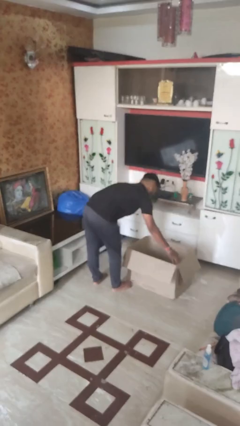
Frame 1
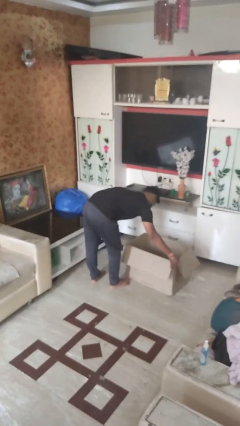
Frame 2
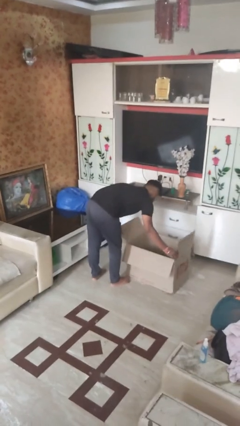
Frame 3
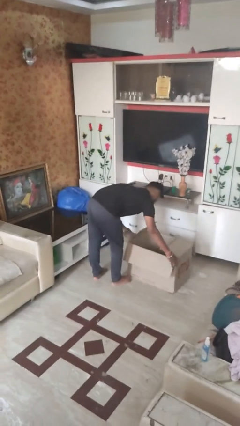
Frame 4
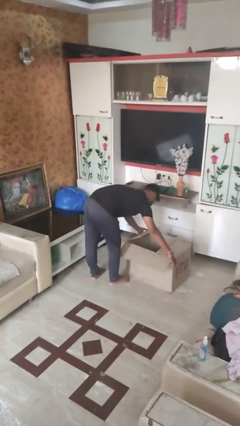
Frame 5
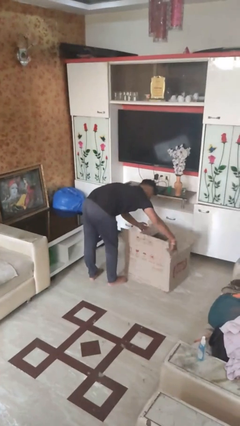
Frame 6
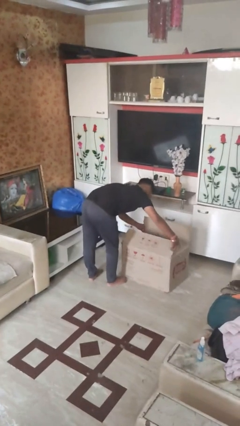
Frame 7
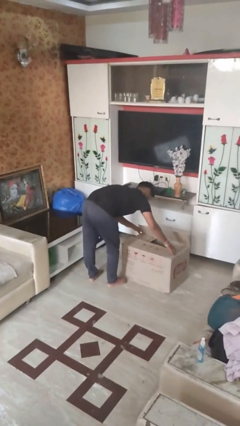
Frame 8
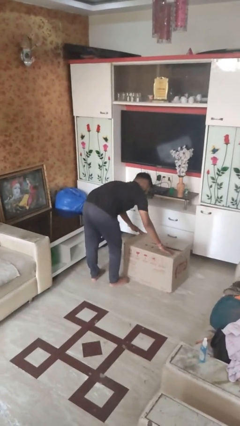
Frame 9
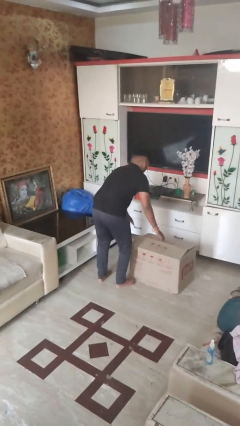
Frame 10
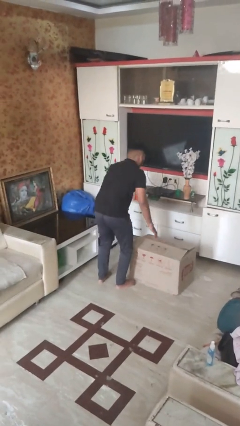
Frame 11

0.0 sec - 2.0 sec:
person closes box

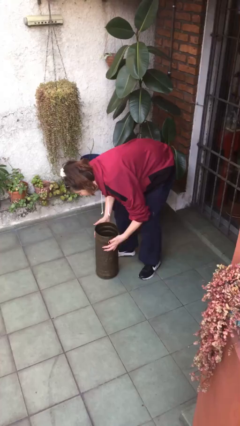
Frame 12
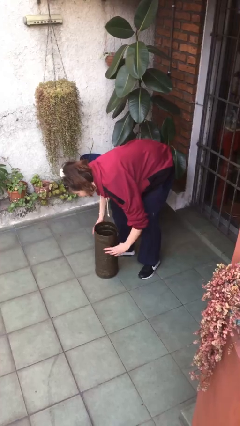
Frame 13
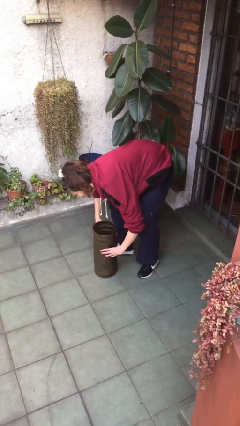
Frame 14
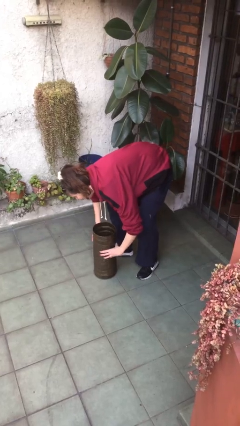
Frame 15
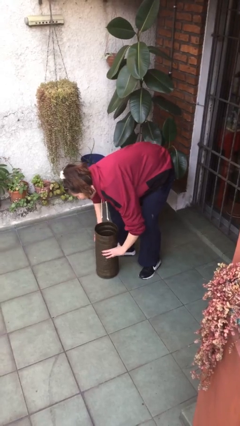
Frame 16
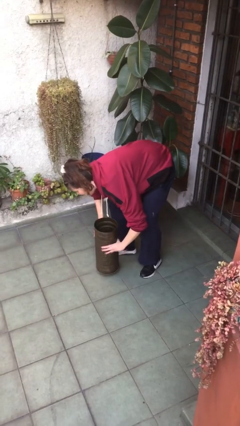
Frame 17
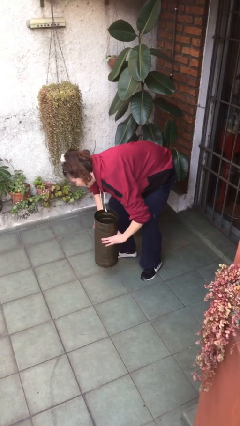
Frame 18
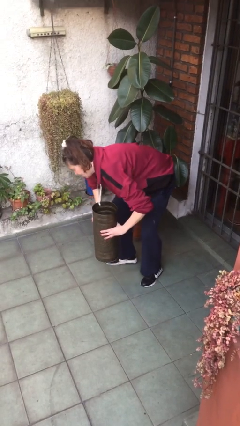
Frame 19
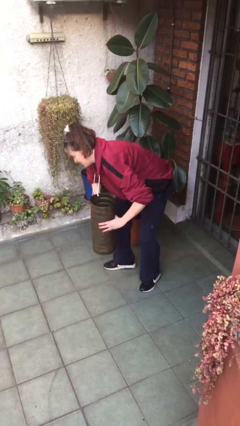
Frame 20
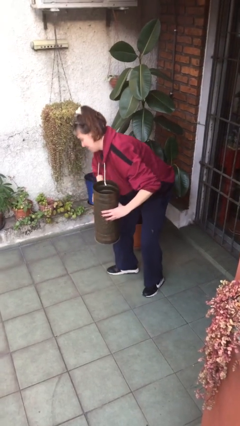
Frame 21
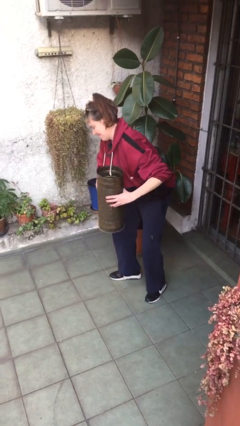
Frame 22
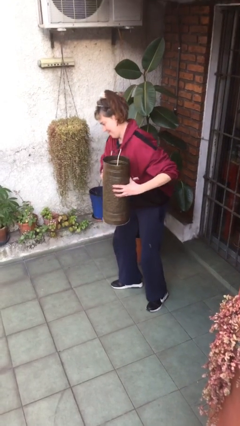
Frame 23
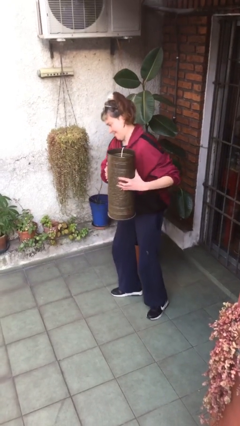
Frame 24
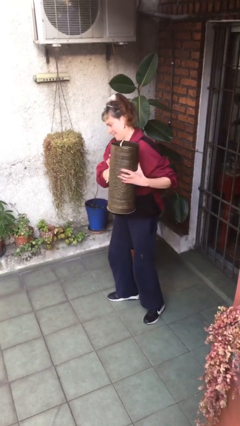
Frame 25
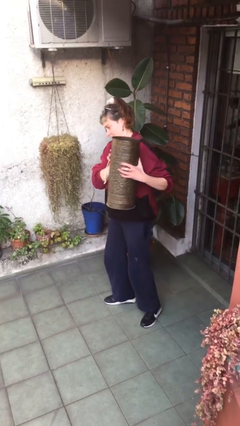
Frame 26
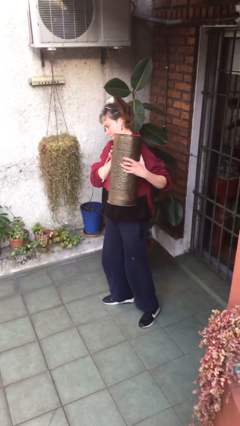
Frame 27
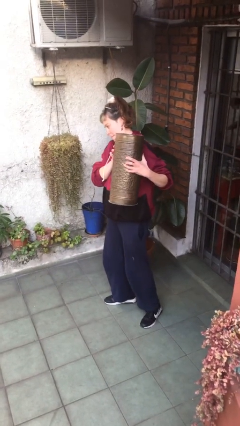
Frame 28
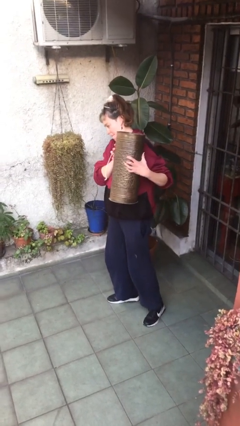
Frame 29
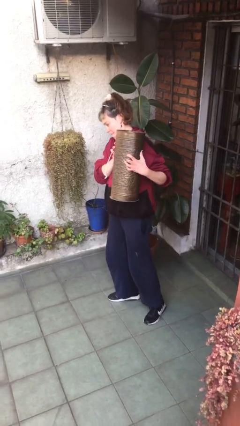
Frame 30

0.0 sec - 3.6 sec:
person picks up object from floor

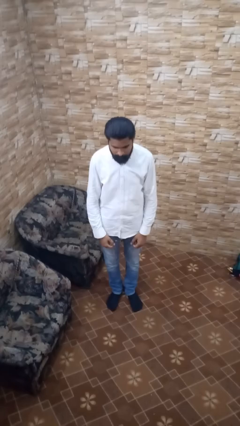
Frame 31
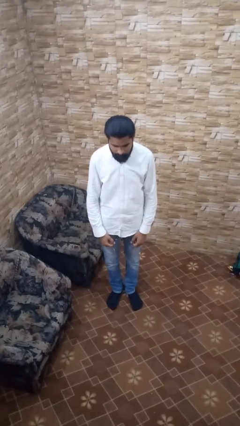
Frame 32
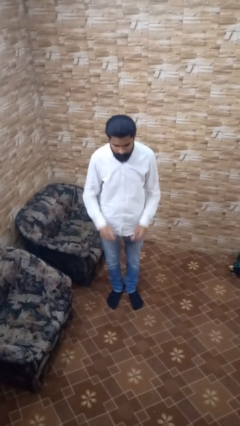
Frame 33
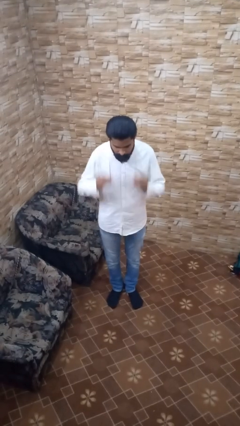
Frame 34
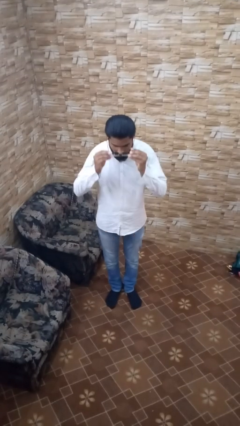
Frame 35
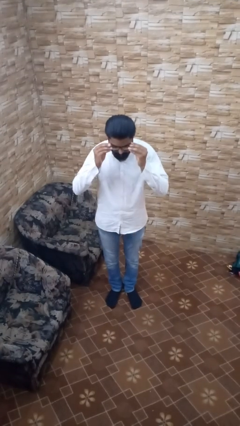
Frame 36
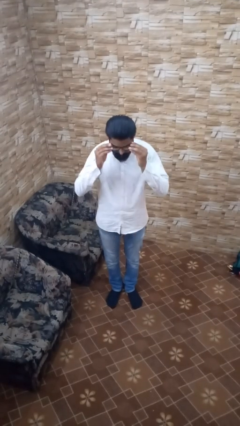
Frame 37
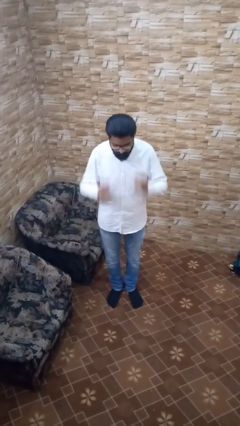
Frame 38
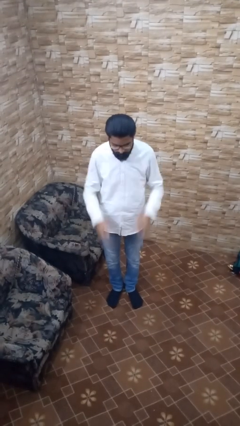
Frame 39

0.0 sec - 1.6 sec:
person puts on glasses

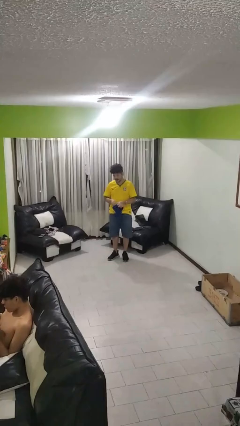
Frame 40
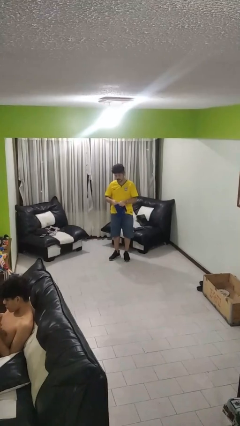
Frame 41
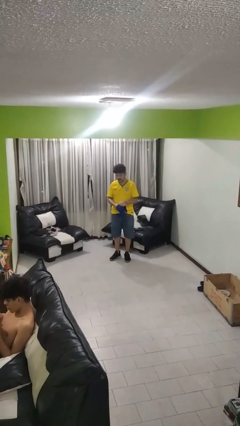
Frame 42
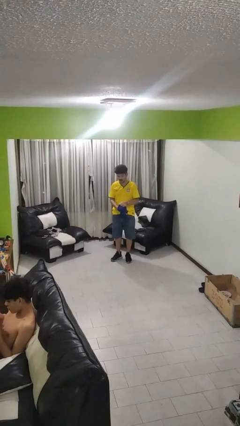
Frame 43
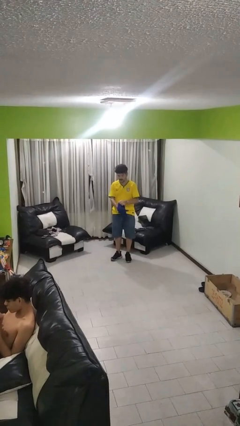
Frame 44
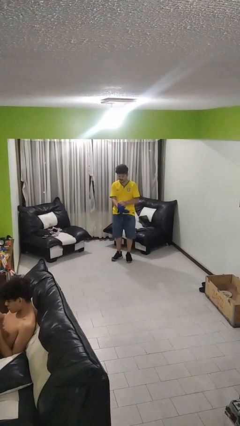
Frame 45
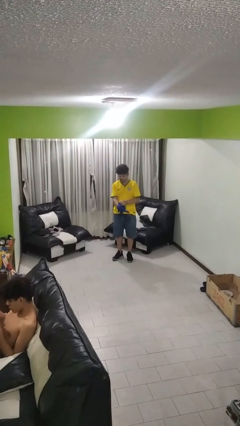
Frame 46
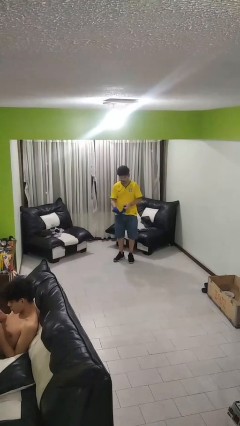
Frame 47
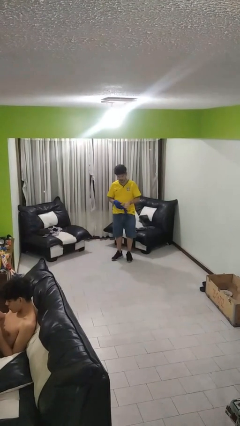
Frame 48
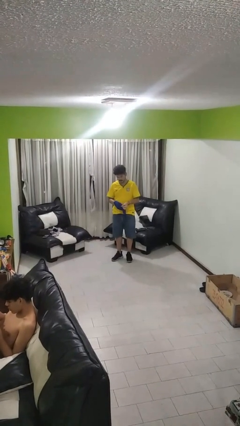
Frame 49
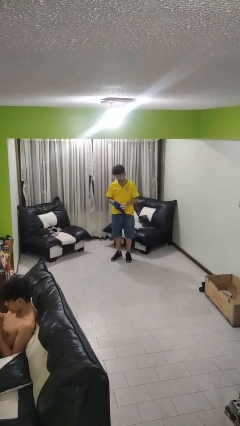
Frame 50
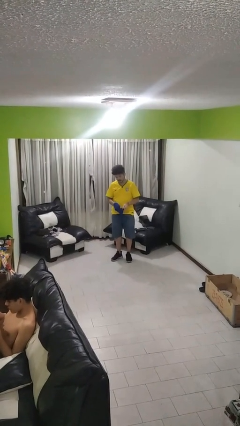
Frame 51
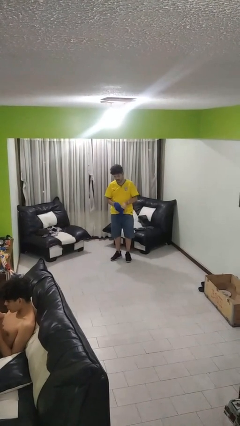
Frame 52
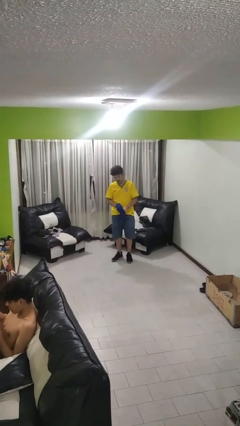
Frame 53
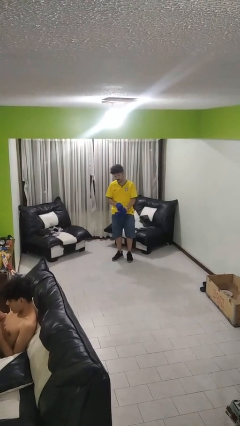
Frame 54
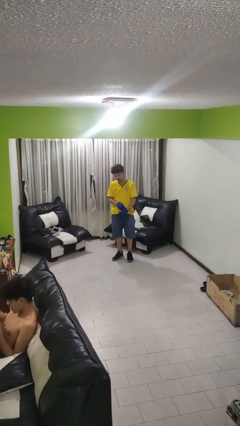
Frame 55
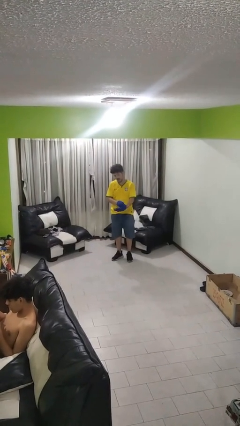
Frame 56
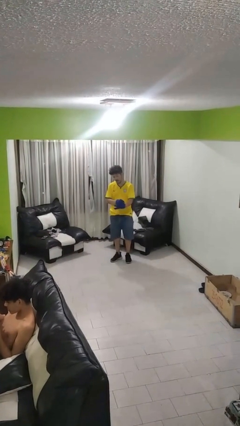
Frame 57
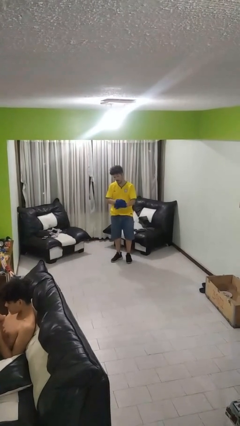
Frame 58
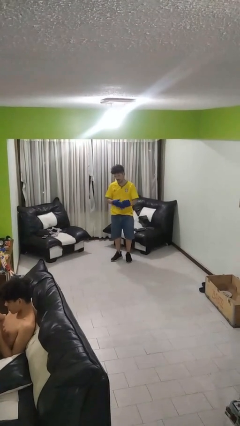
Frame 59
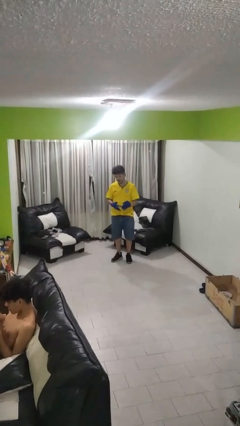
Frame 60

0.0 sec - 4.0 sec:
person puts on gloves

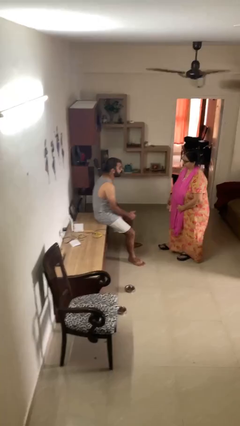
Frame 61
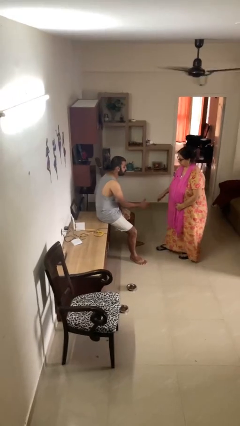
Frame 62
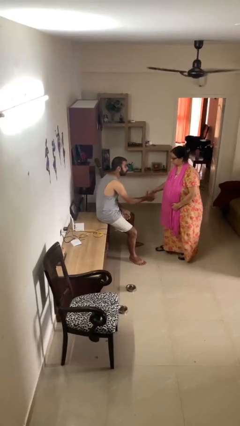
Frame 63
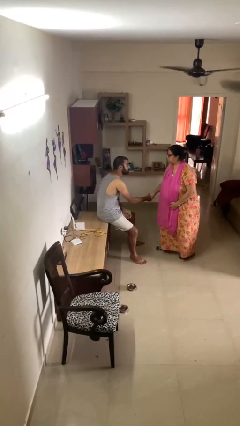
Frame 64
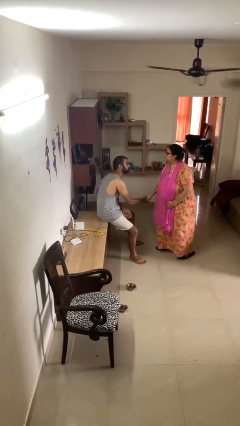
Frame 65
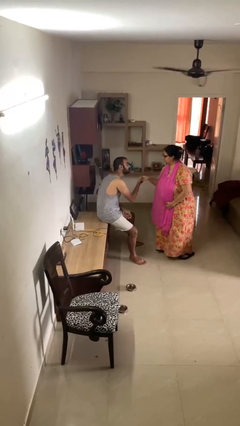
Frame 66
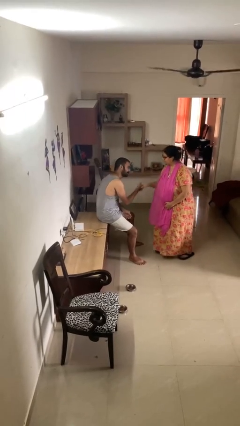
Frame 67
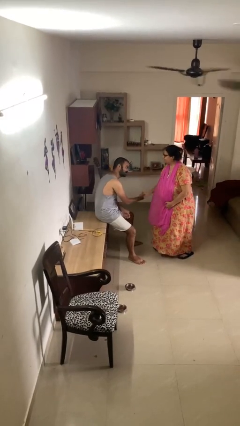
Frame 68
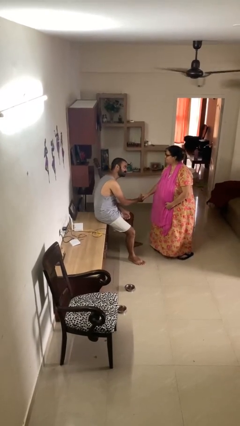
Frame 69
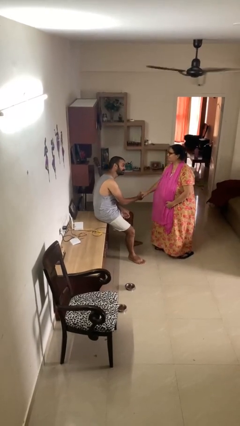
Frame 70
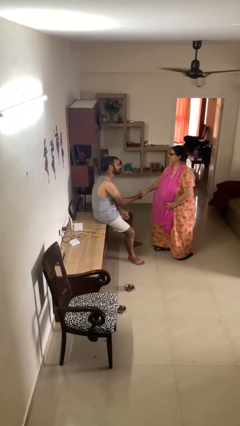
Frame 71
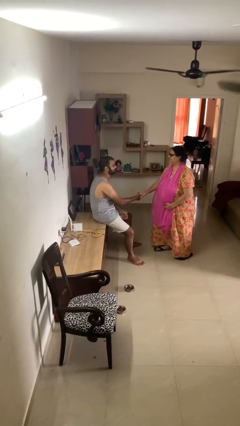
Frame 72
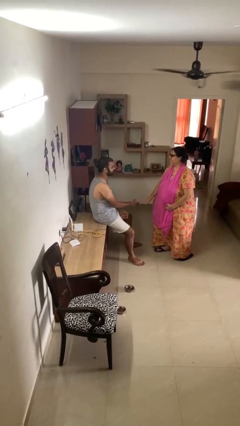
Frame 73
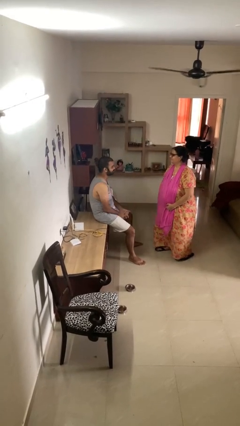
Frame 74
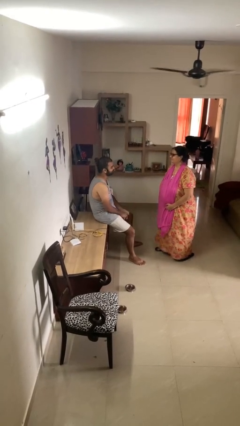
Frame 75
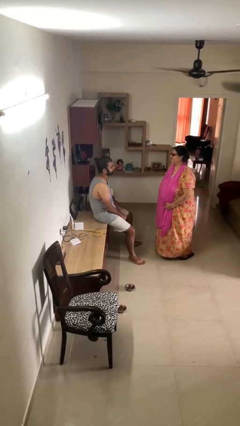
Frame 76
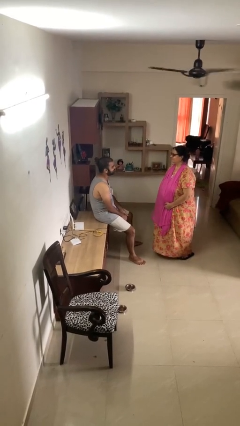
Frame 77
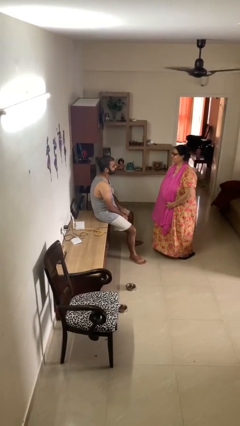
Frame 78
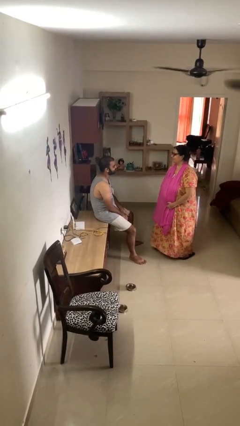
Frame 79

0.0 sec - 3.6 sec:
person shakes hand

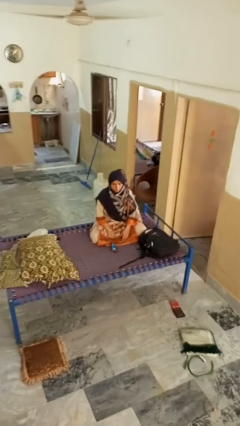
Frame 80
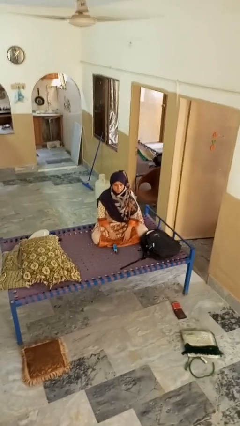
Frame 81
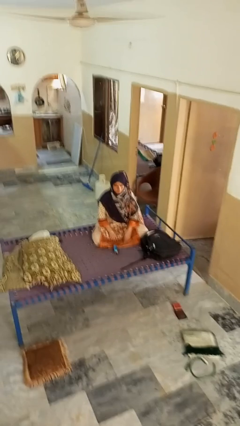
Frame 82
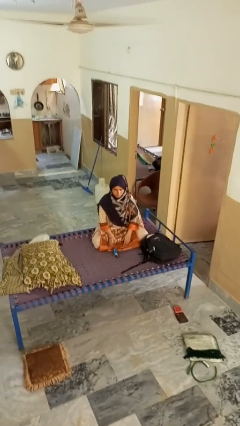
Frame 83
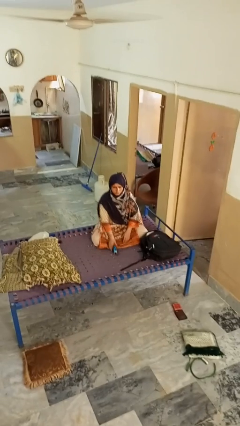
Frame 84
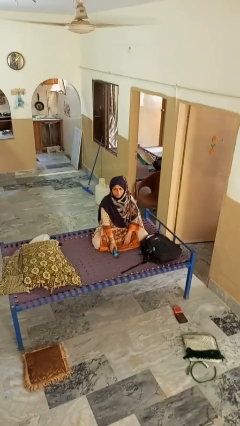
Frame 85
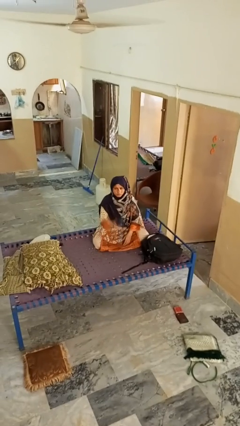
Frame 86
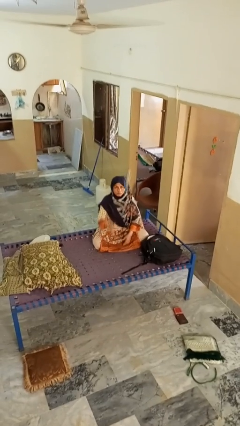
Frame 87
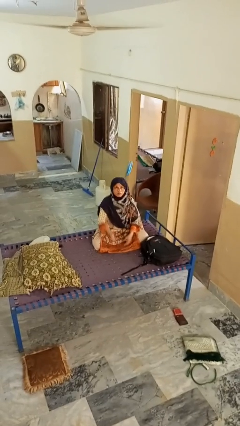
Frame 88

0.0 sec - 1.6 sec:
person drops object

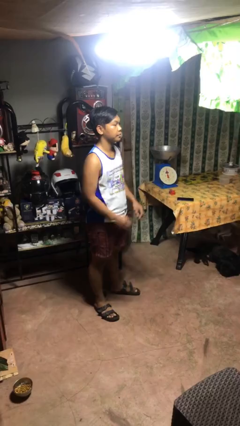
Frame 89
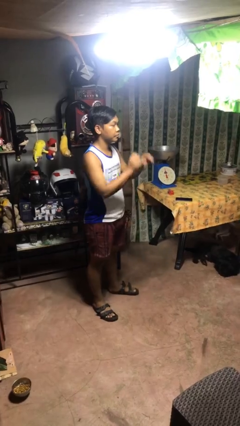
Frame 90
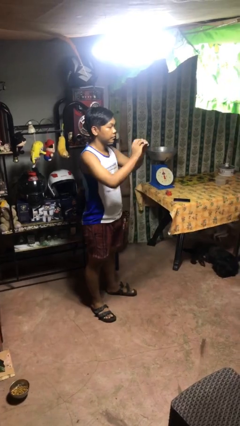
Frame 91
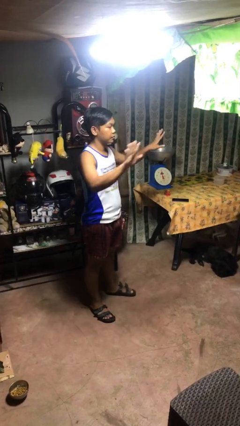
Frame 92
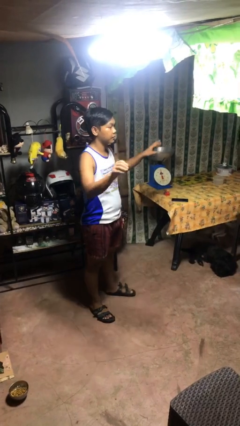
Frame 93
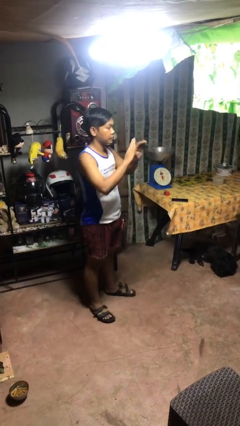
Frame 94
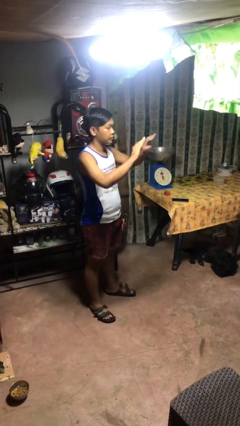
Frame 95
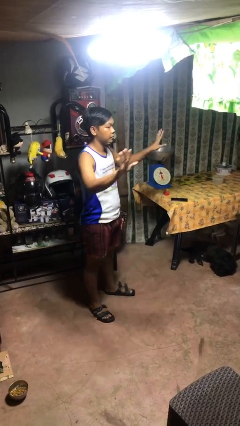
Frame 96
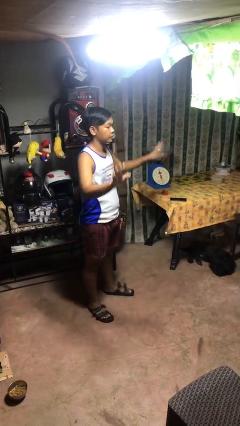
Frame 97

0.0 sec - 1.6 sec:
person gestures zoom in
